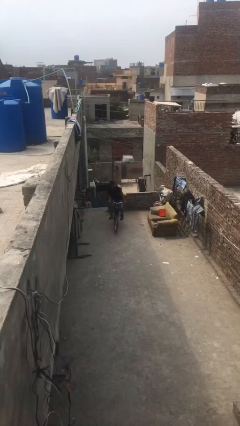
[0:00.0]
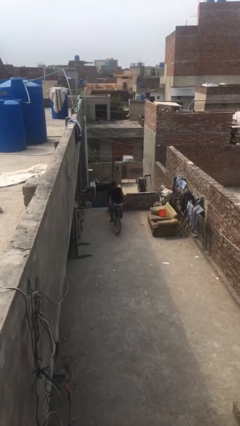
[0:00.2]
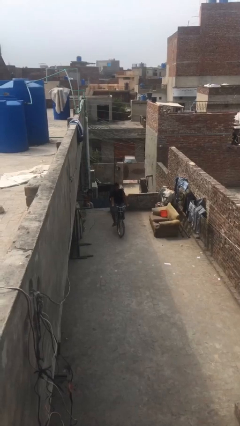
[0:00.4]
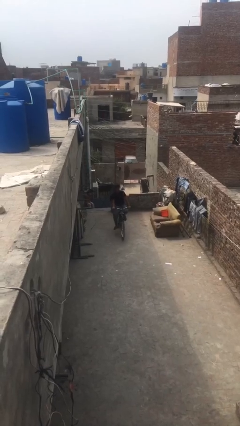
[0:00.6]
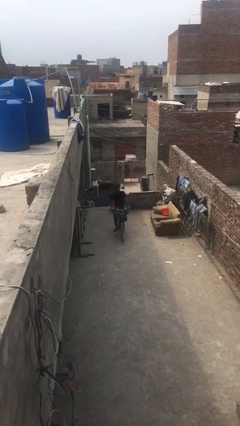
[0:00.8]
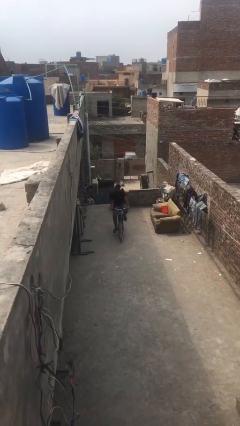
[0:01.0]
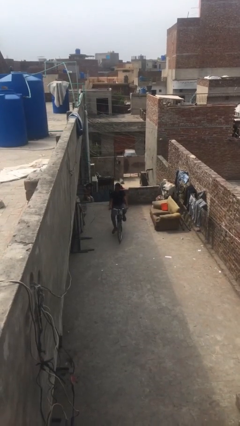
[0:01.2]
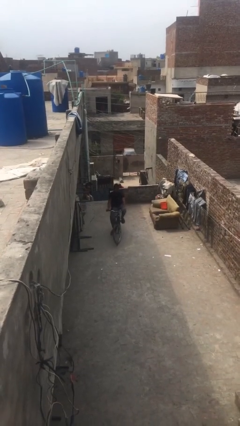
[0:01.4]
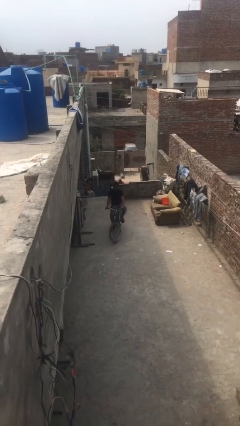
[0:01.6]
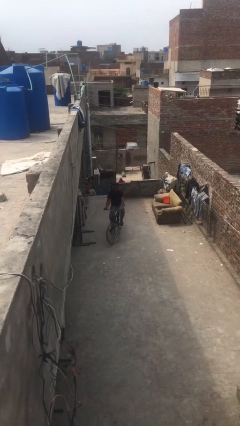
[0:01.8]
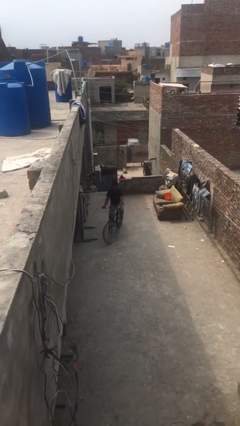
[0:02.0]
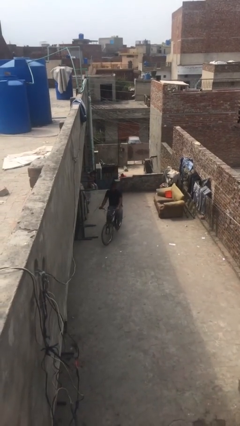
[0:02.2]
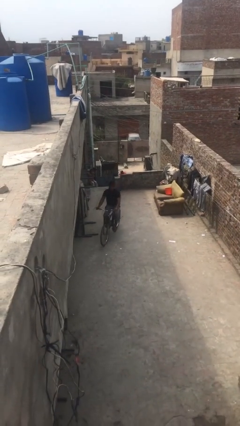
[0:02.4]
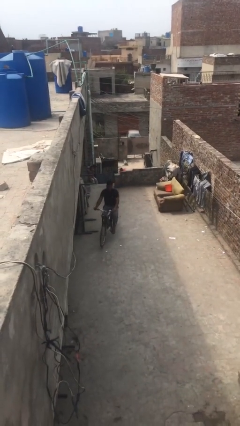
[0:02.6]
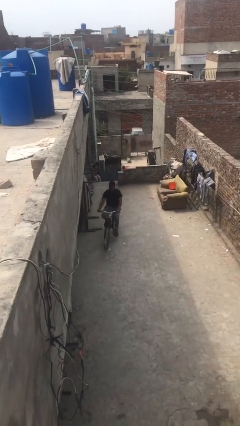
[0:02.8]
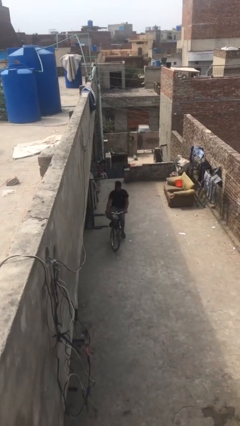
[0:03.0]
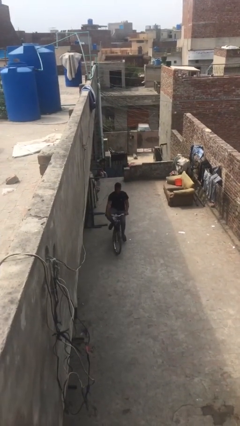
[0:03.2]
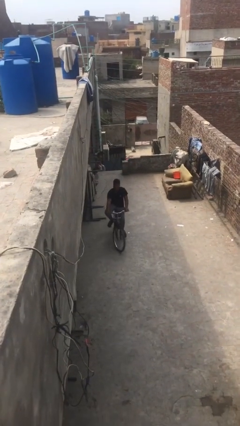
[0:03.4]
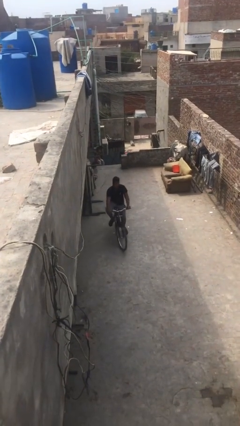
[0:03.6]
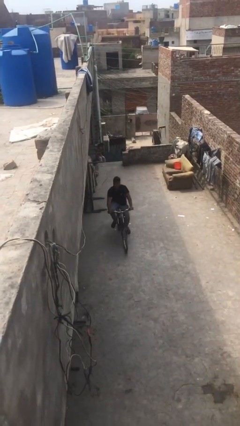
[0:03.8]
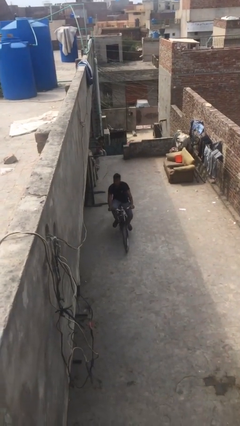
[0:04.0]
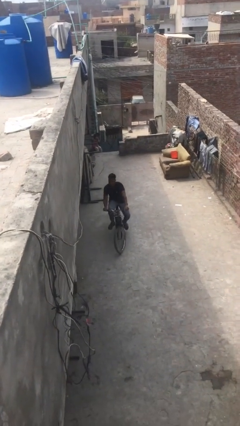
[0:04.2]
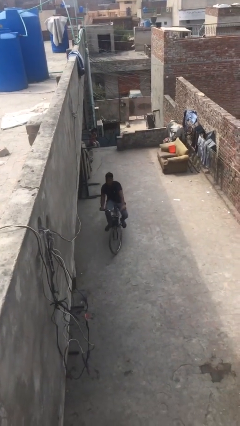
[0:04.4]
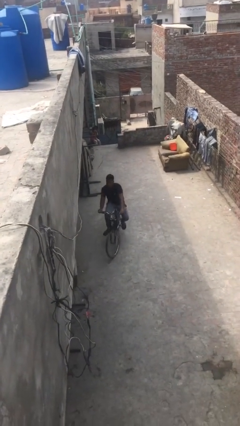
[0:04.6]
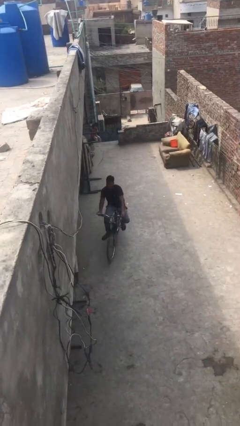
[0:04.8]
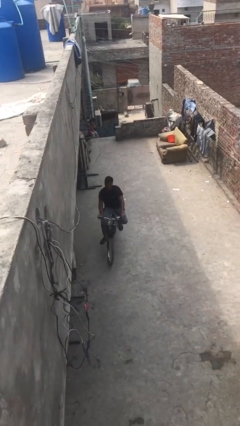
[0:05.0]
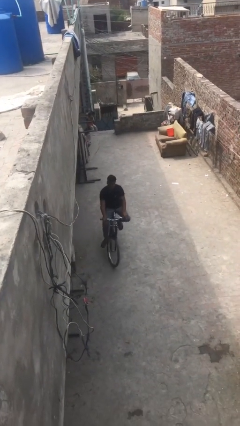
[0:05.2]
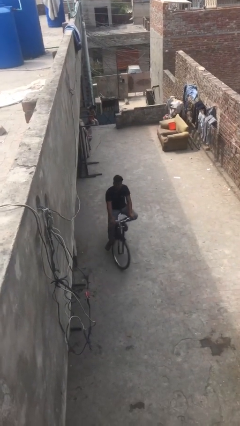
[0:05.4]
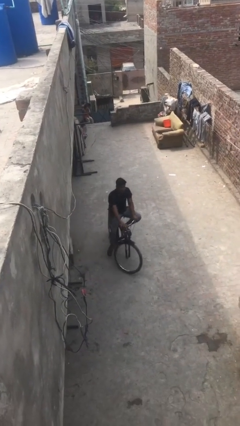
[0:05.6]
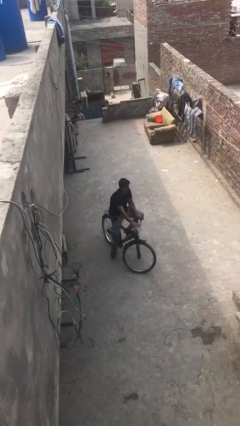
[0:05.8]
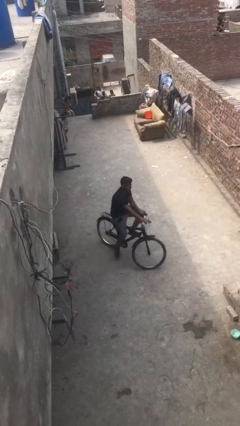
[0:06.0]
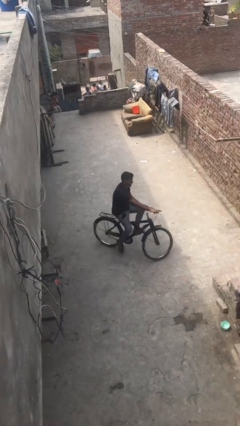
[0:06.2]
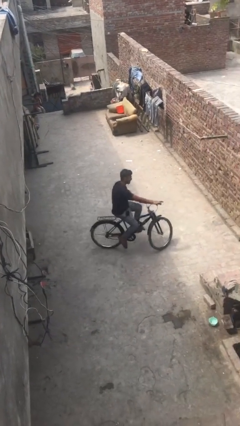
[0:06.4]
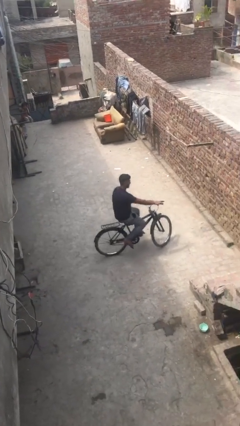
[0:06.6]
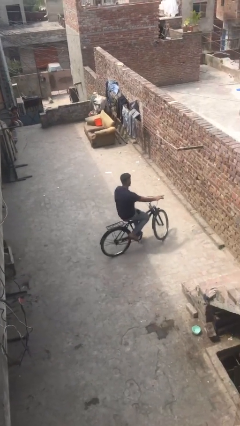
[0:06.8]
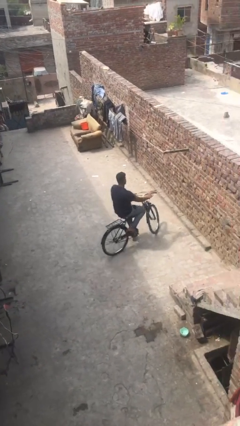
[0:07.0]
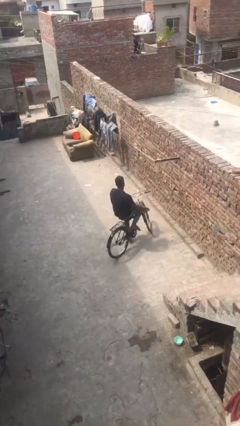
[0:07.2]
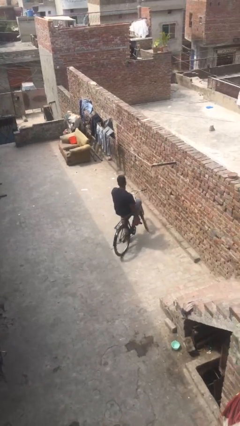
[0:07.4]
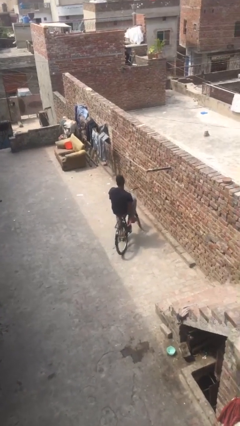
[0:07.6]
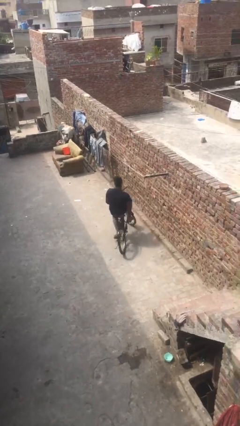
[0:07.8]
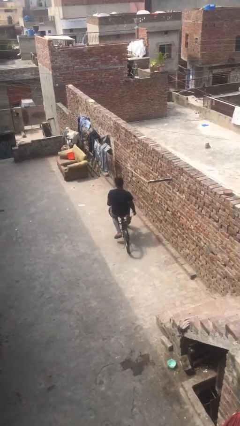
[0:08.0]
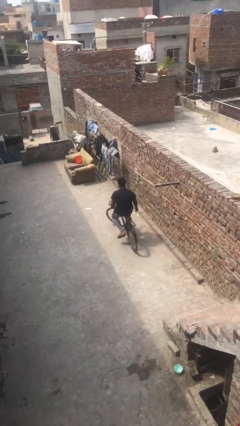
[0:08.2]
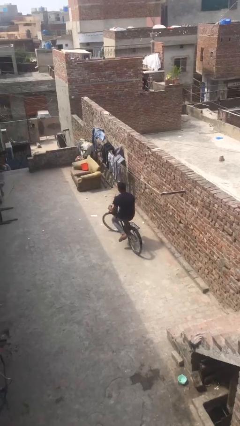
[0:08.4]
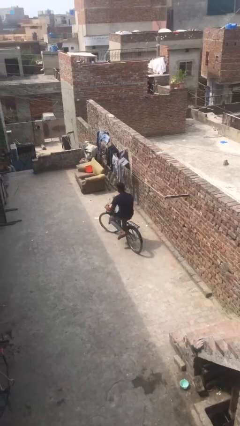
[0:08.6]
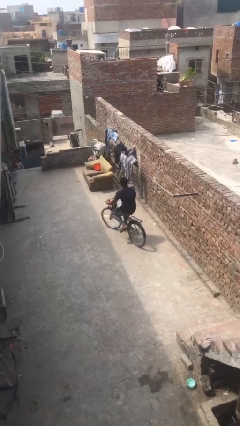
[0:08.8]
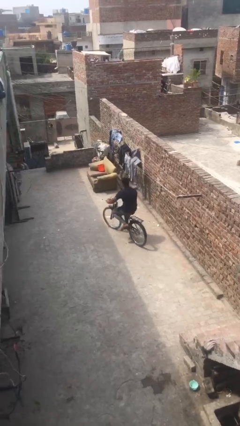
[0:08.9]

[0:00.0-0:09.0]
person rides bicycle

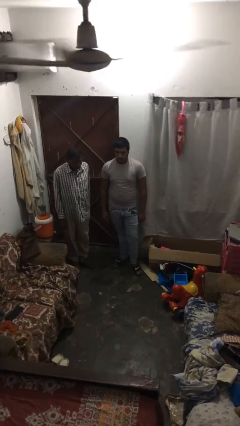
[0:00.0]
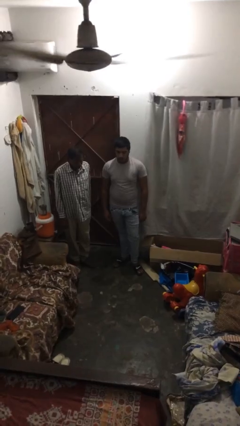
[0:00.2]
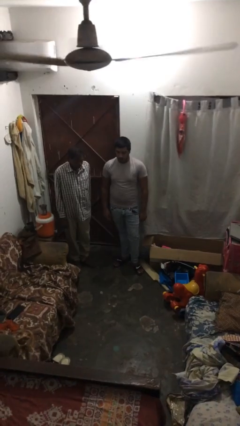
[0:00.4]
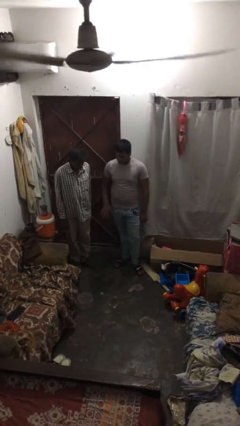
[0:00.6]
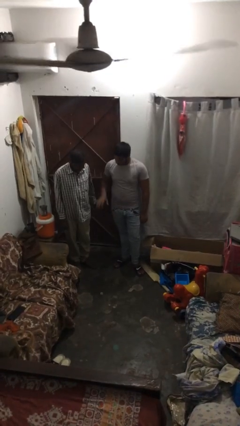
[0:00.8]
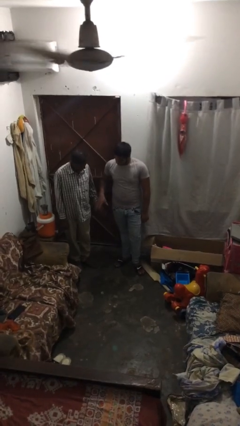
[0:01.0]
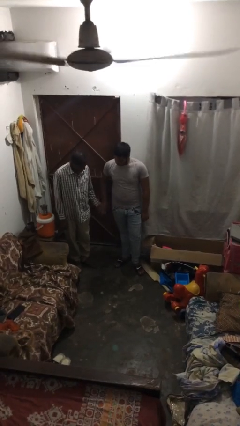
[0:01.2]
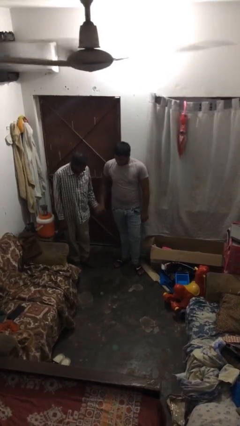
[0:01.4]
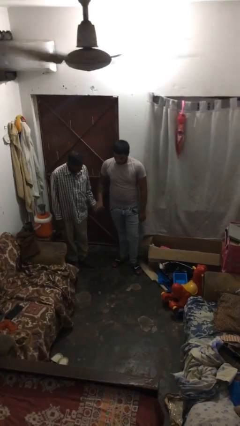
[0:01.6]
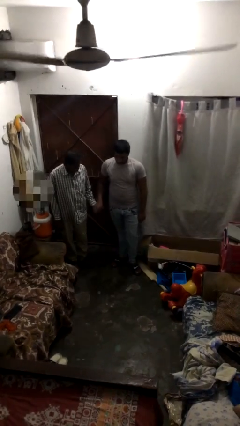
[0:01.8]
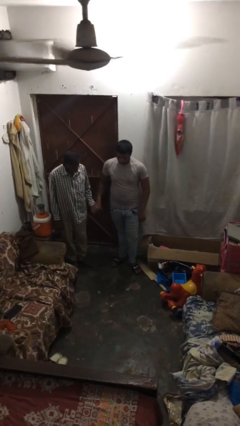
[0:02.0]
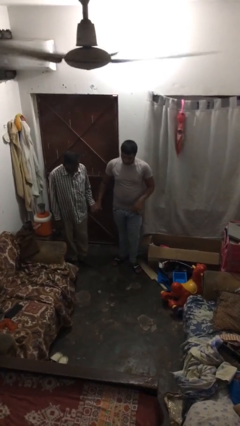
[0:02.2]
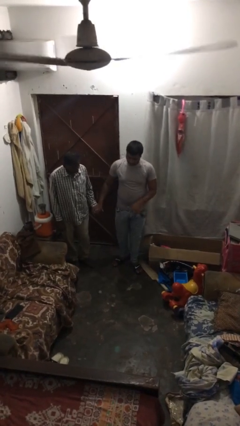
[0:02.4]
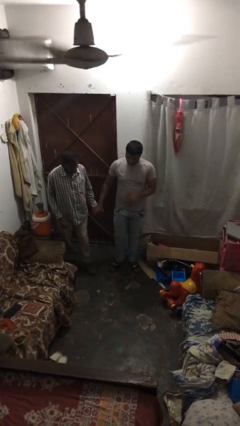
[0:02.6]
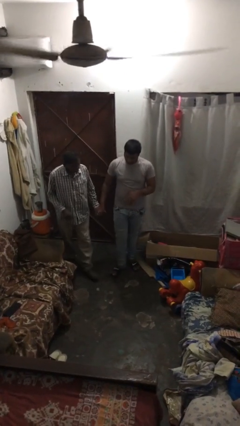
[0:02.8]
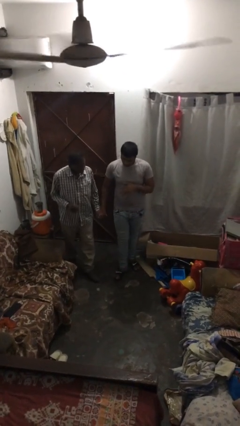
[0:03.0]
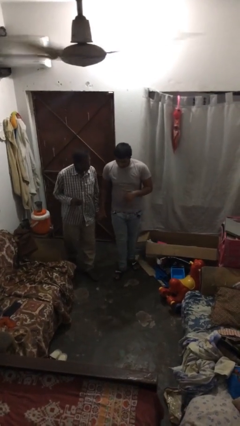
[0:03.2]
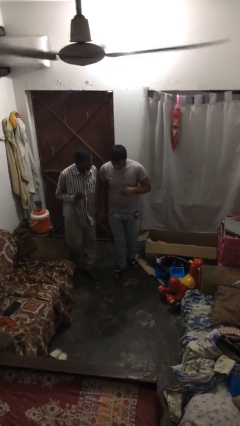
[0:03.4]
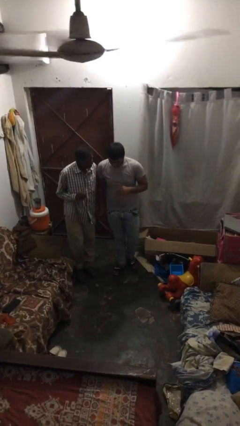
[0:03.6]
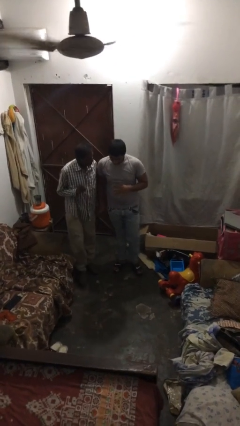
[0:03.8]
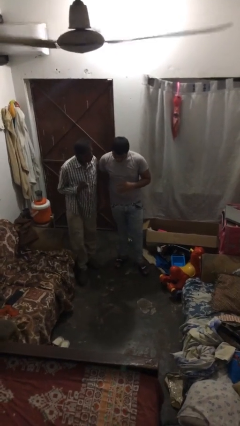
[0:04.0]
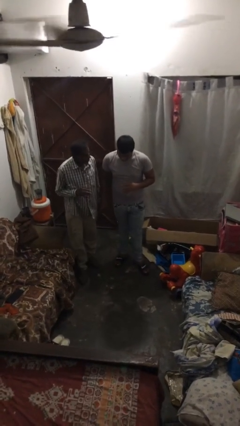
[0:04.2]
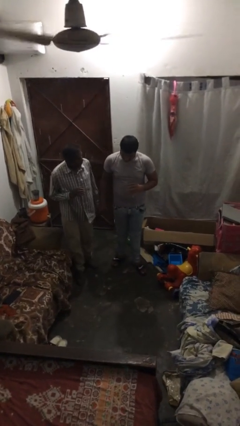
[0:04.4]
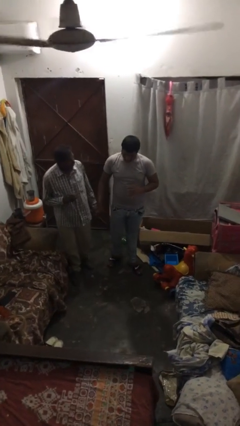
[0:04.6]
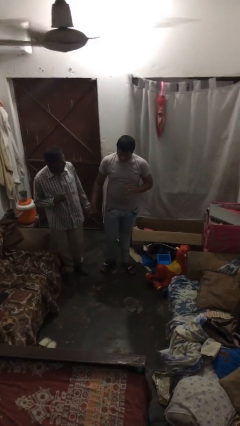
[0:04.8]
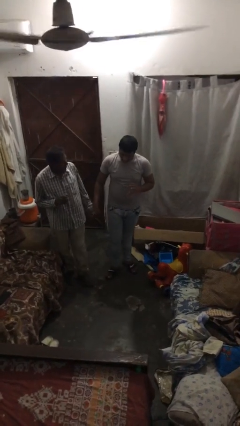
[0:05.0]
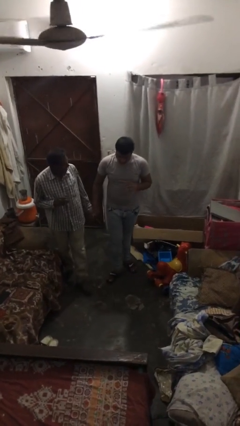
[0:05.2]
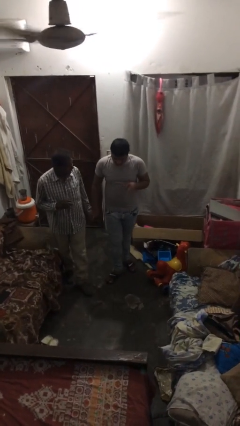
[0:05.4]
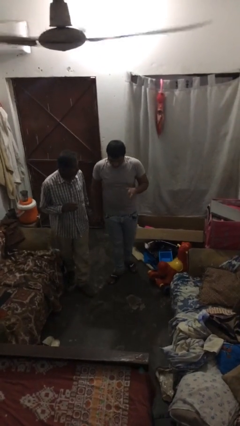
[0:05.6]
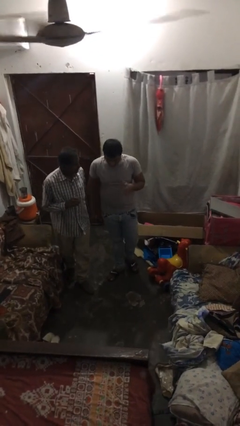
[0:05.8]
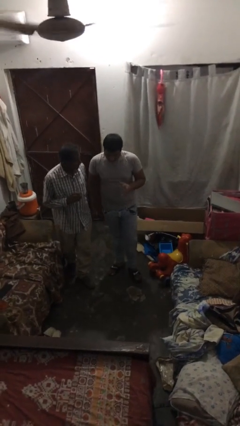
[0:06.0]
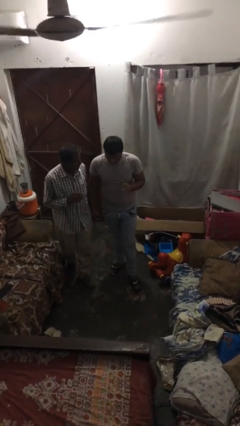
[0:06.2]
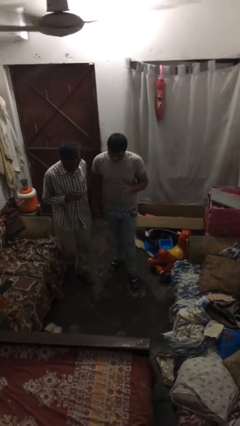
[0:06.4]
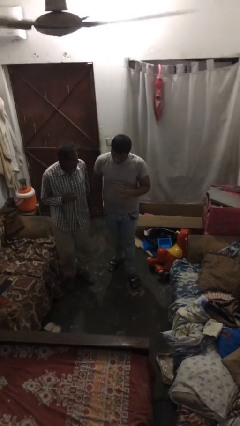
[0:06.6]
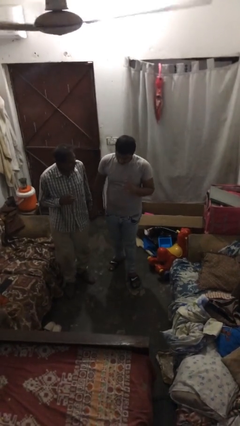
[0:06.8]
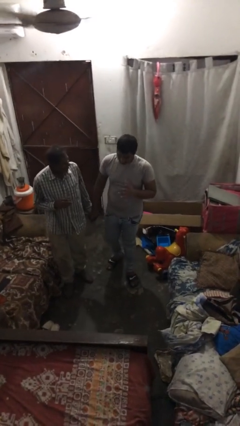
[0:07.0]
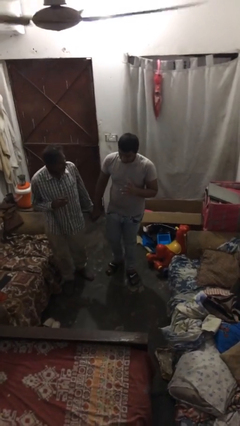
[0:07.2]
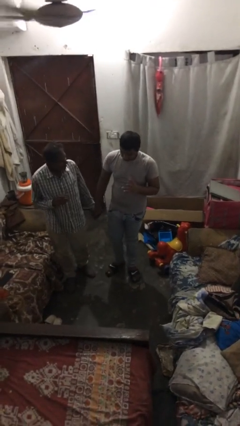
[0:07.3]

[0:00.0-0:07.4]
person holds hand

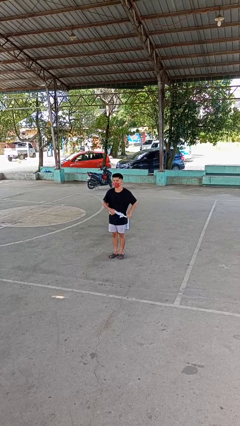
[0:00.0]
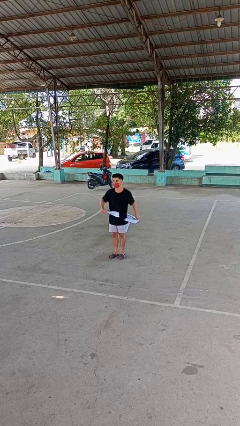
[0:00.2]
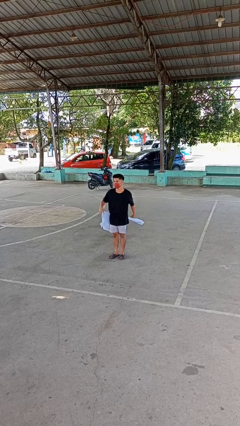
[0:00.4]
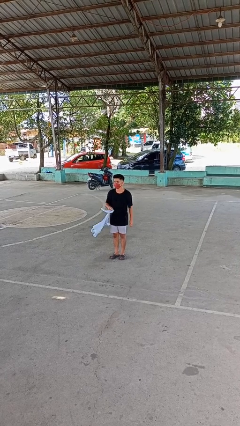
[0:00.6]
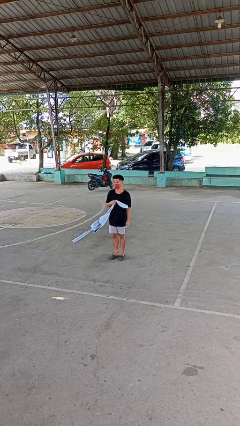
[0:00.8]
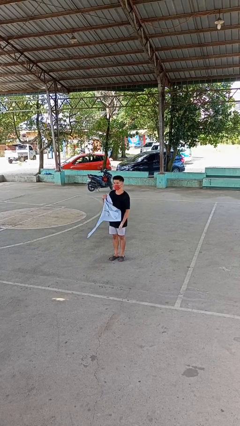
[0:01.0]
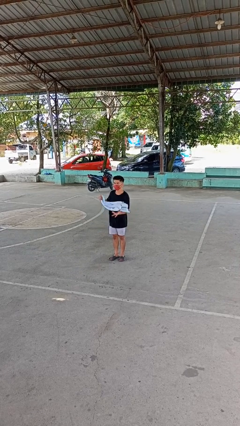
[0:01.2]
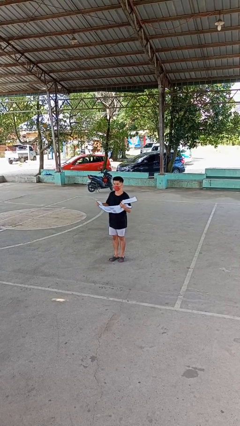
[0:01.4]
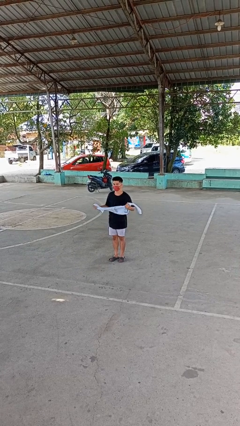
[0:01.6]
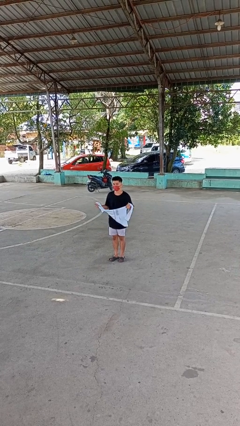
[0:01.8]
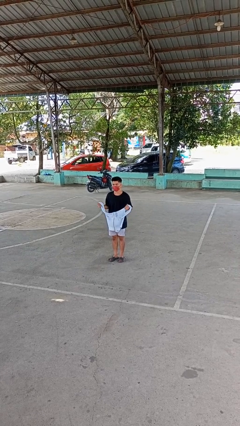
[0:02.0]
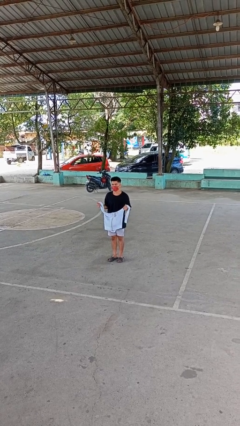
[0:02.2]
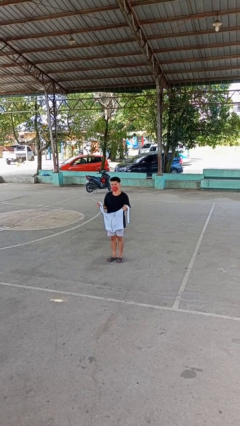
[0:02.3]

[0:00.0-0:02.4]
person unties jacket around waist
